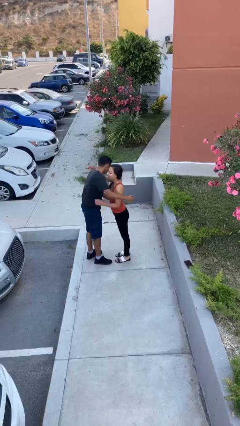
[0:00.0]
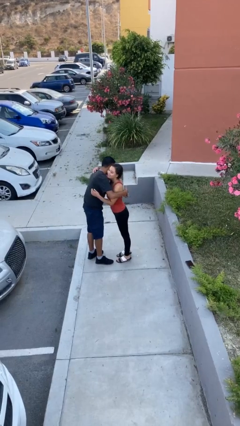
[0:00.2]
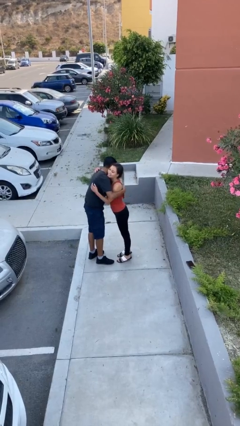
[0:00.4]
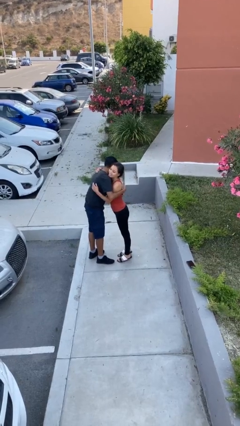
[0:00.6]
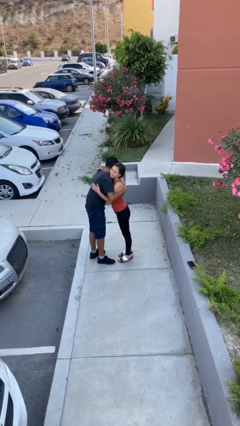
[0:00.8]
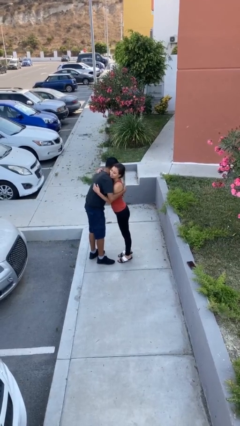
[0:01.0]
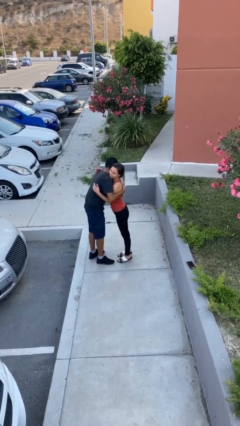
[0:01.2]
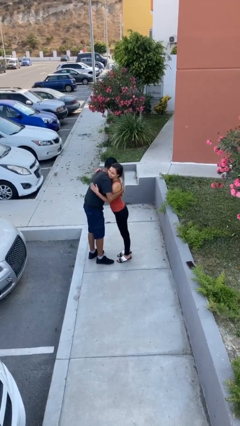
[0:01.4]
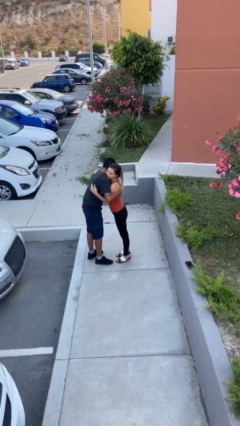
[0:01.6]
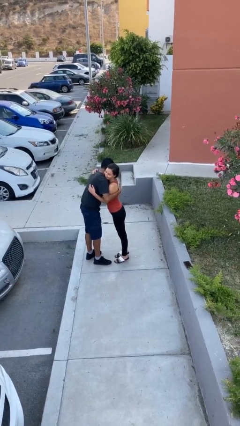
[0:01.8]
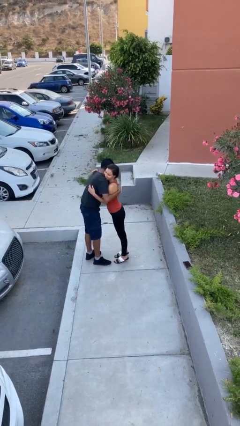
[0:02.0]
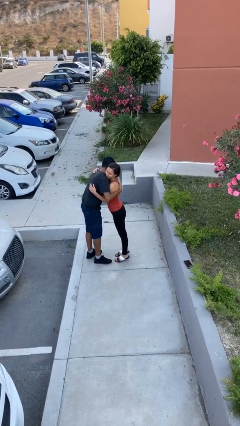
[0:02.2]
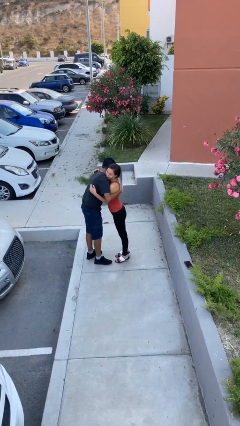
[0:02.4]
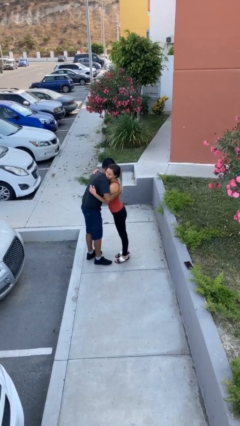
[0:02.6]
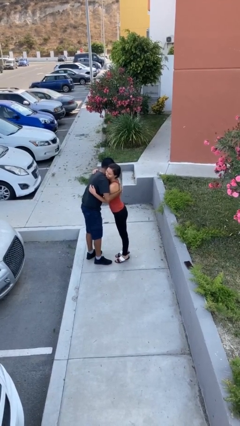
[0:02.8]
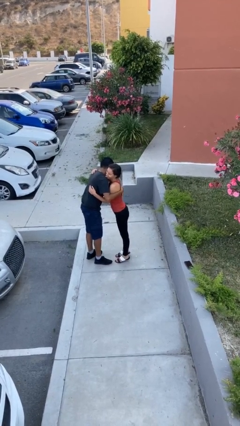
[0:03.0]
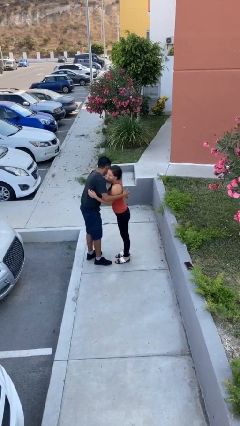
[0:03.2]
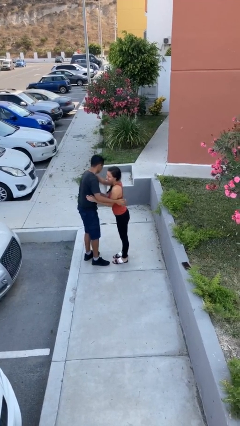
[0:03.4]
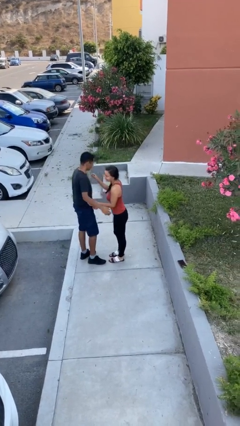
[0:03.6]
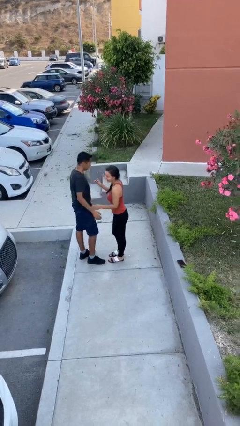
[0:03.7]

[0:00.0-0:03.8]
person embraces person

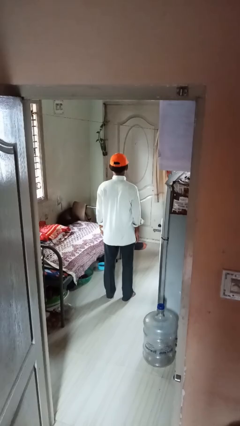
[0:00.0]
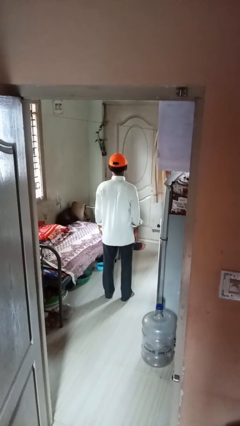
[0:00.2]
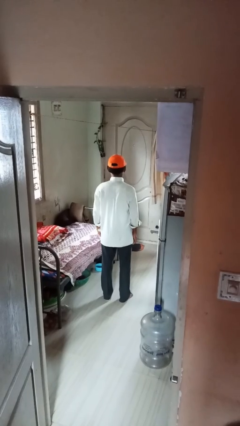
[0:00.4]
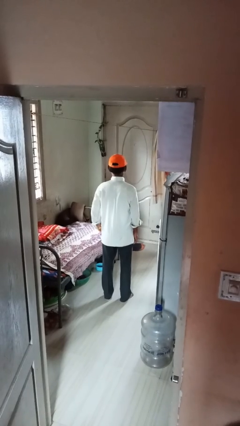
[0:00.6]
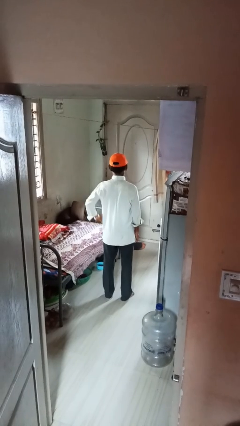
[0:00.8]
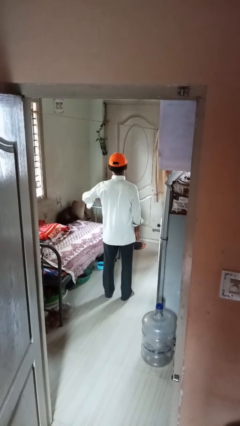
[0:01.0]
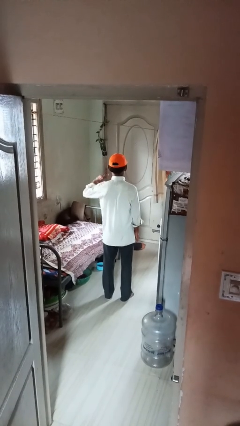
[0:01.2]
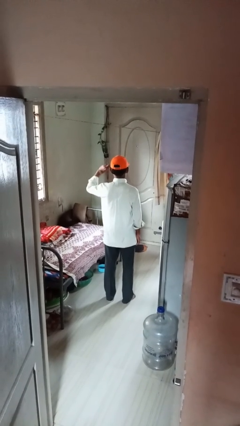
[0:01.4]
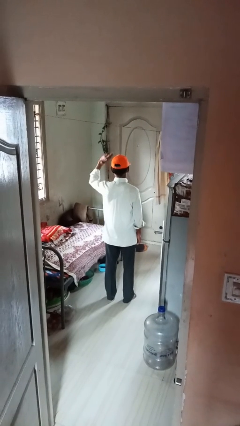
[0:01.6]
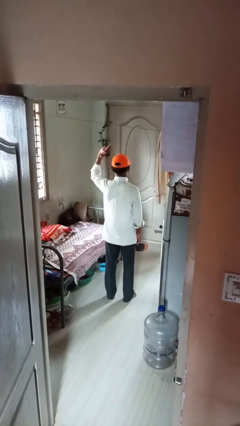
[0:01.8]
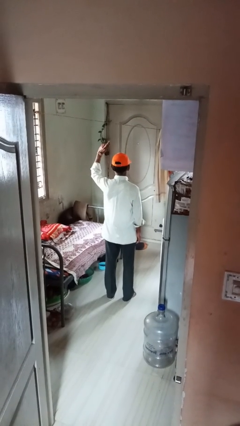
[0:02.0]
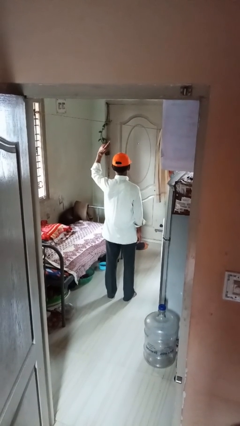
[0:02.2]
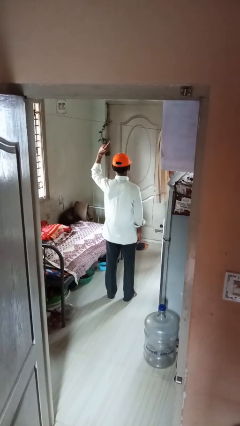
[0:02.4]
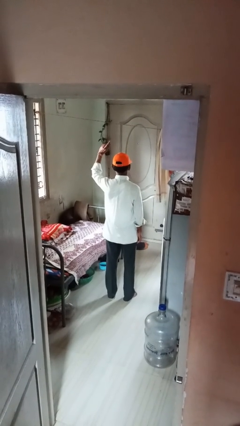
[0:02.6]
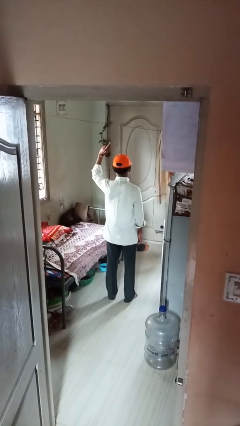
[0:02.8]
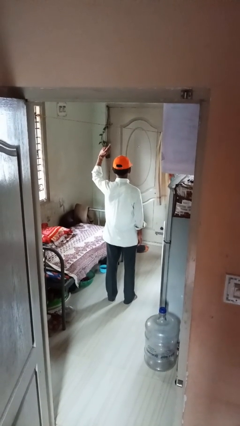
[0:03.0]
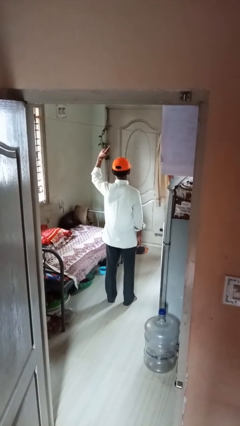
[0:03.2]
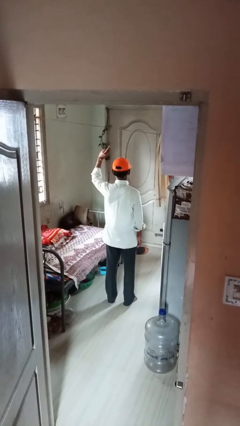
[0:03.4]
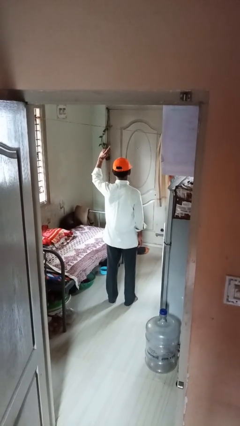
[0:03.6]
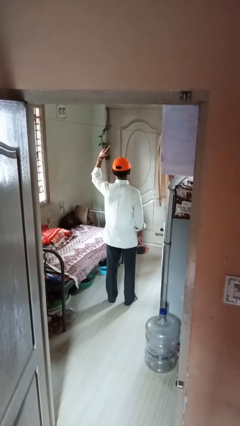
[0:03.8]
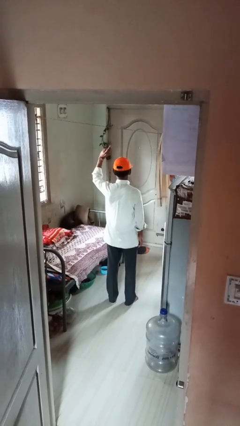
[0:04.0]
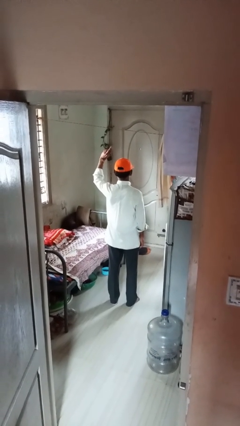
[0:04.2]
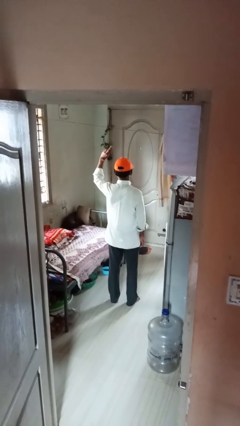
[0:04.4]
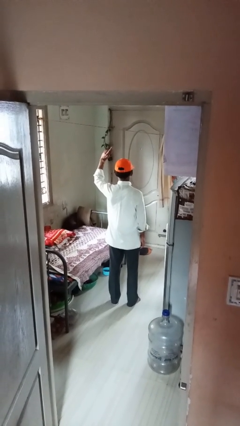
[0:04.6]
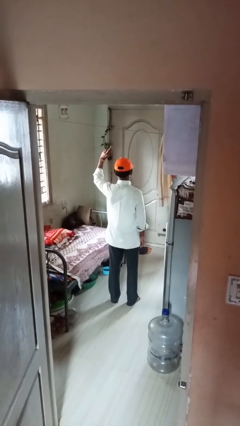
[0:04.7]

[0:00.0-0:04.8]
person gestures swipe up

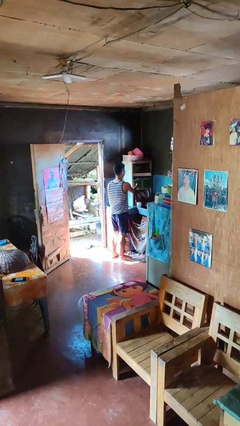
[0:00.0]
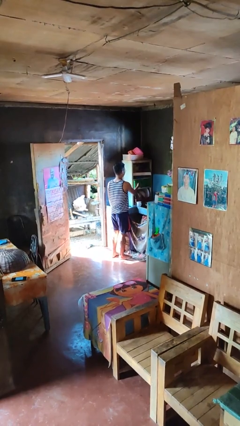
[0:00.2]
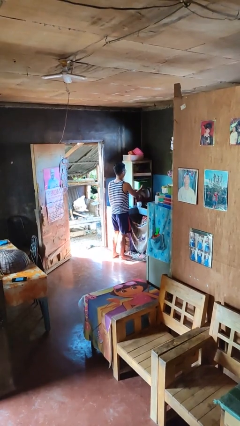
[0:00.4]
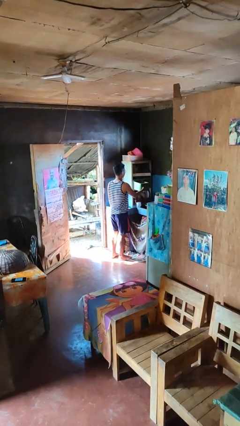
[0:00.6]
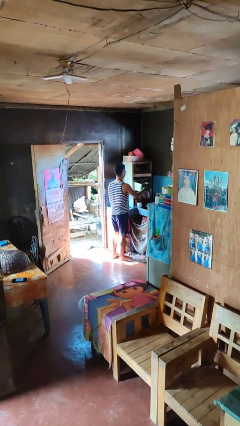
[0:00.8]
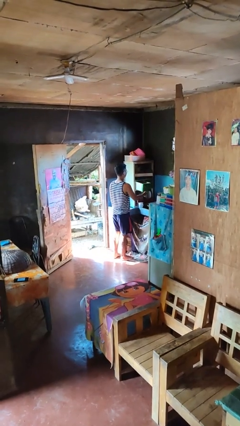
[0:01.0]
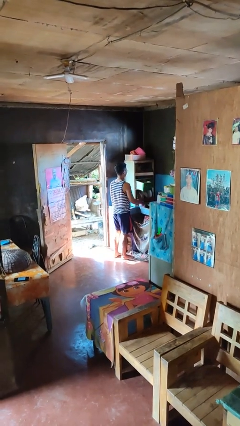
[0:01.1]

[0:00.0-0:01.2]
person opens cabinet

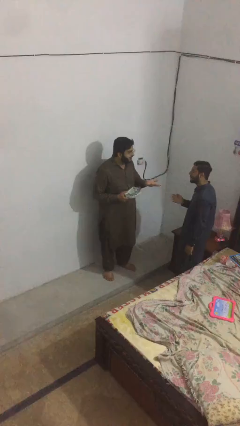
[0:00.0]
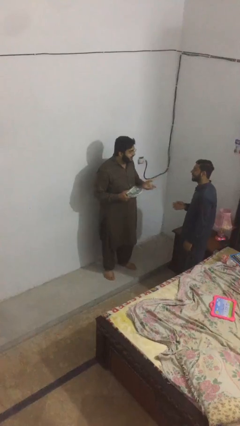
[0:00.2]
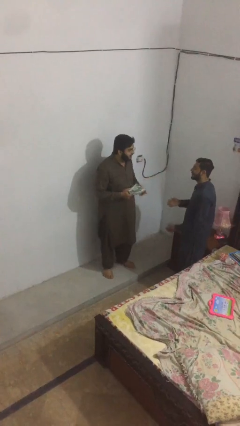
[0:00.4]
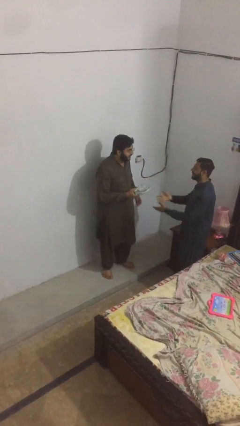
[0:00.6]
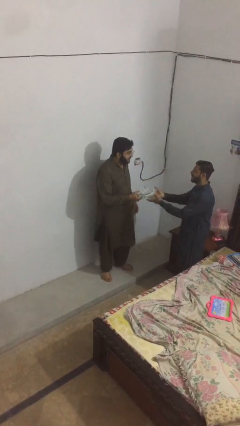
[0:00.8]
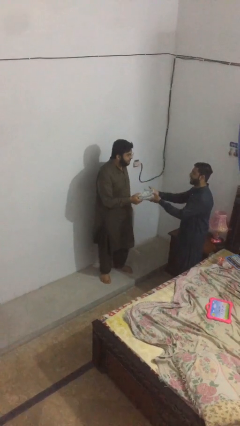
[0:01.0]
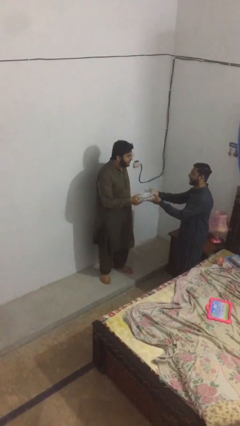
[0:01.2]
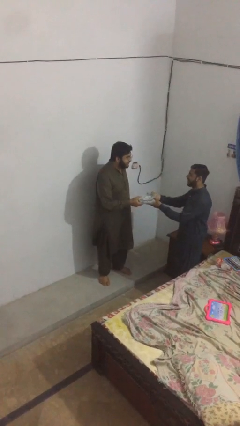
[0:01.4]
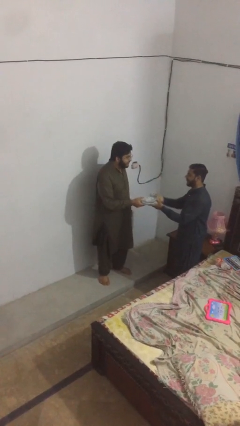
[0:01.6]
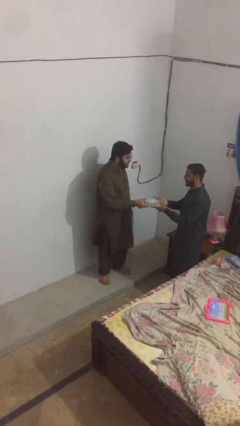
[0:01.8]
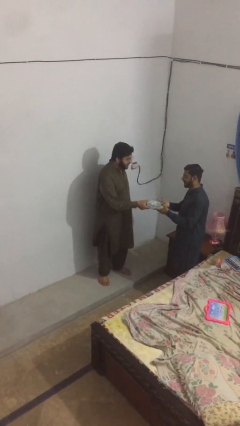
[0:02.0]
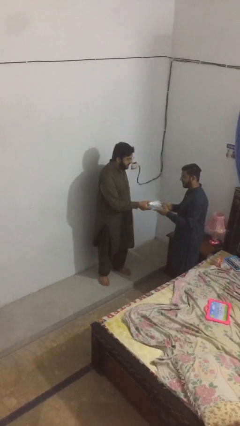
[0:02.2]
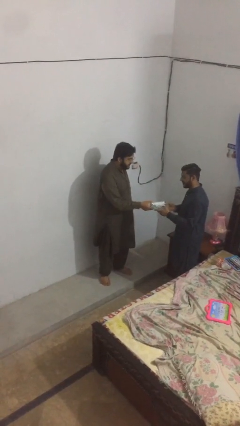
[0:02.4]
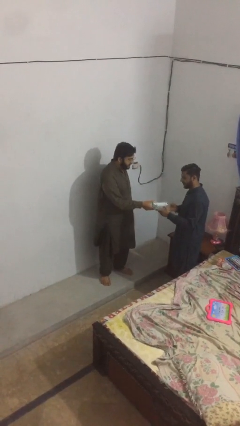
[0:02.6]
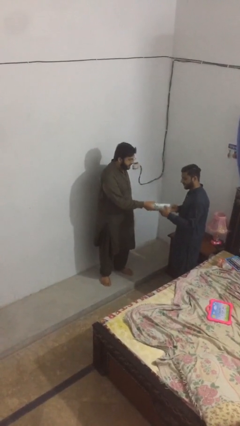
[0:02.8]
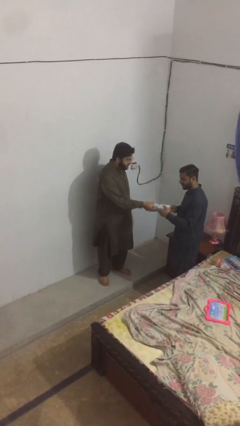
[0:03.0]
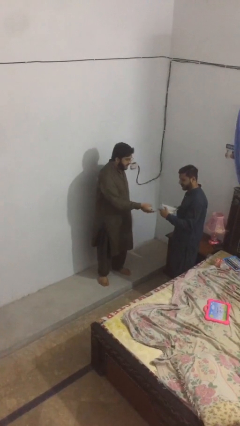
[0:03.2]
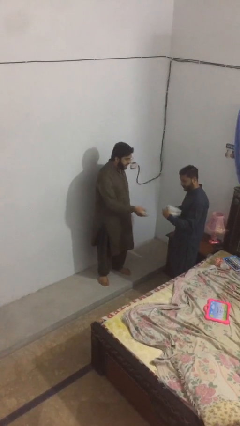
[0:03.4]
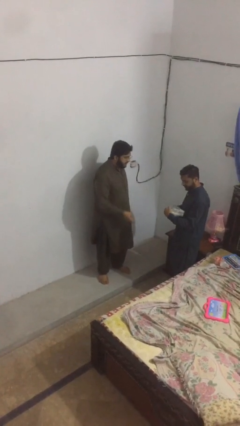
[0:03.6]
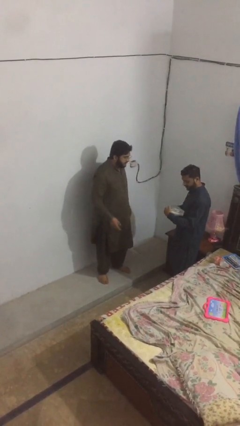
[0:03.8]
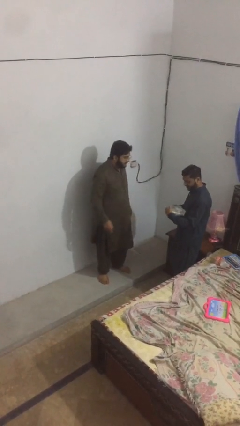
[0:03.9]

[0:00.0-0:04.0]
person transfers object to person

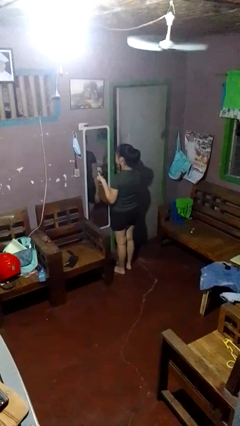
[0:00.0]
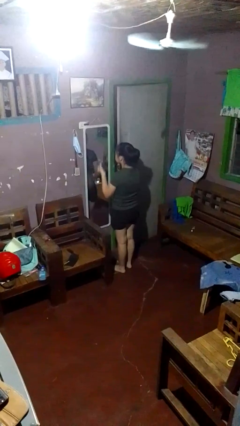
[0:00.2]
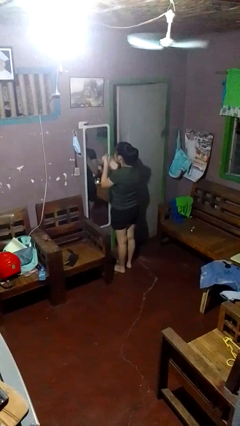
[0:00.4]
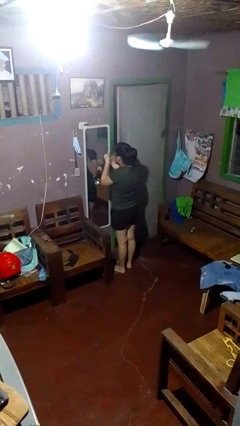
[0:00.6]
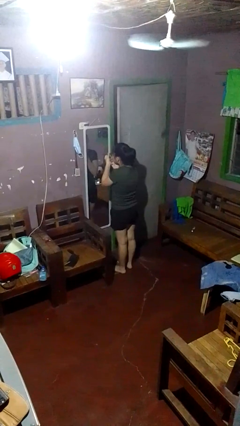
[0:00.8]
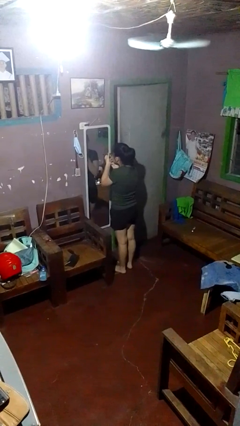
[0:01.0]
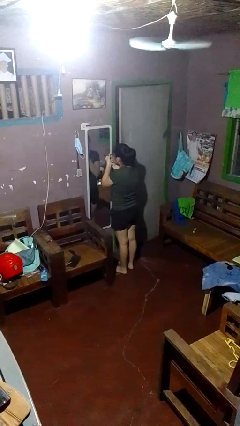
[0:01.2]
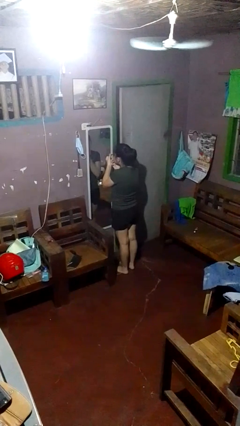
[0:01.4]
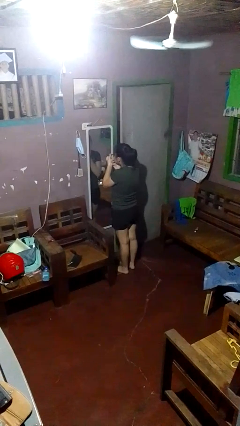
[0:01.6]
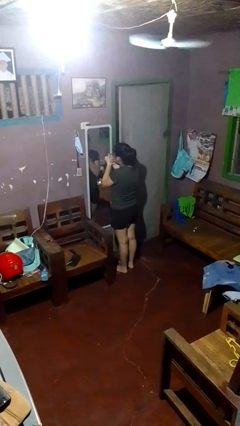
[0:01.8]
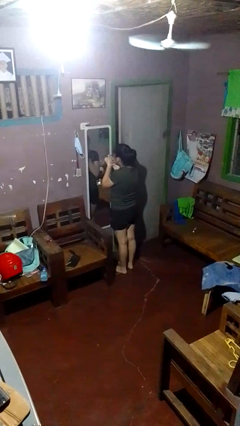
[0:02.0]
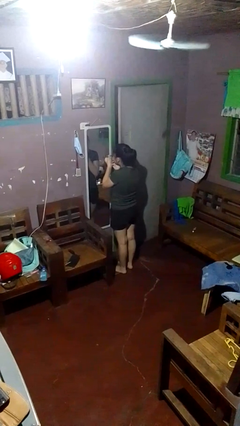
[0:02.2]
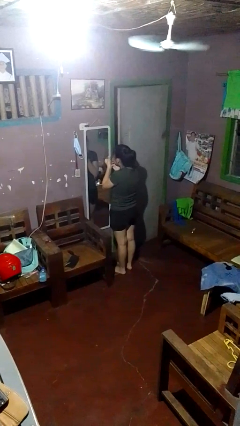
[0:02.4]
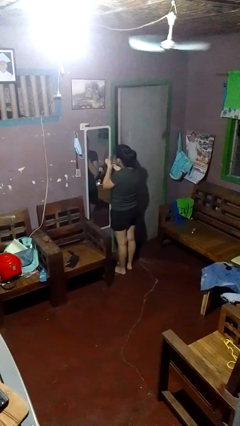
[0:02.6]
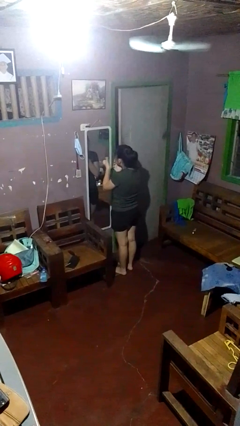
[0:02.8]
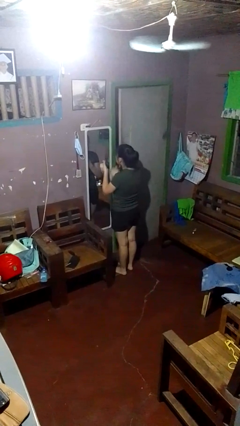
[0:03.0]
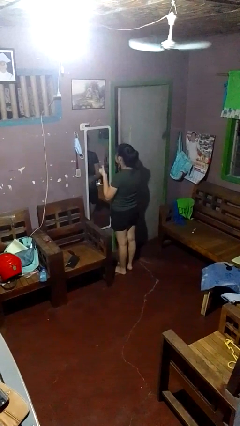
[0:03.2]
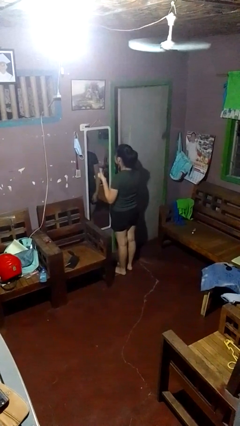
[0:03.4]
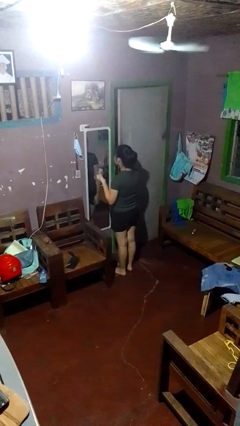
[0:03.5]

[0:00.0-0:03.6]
person applies eye makeup

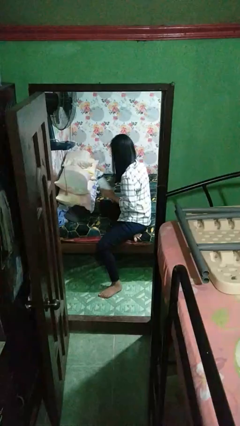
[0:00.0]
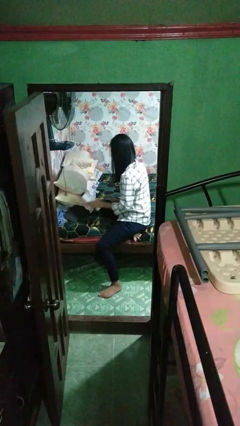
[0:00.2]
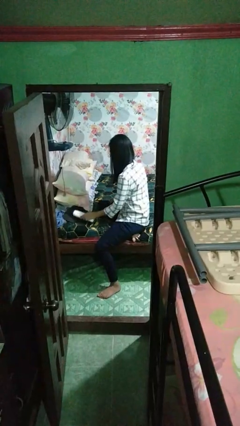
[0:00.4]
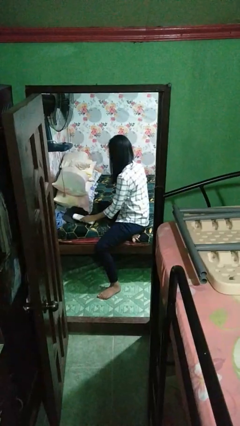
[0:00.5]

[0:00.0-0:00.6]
person puts down object on bed
